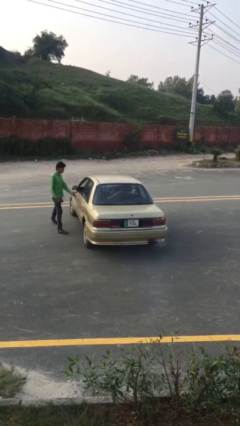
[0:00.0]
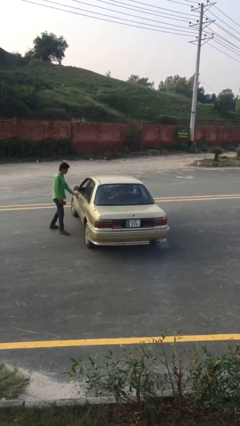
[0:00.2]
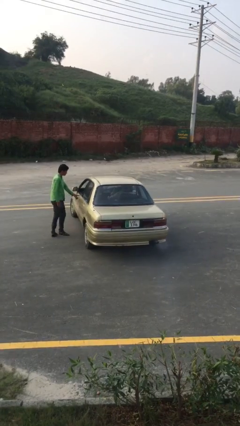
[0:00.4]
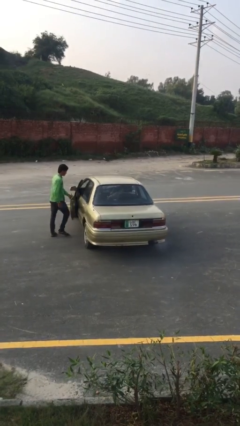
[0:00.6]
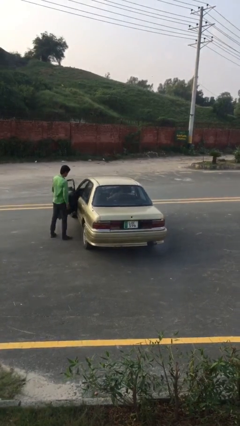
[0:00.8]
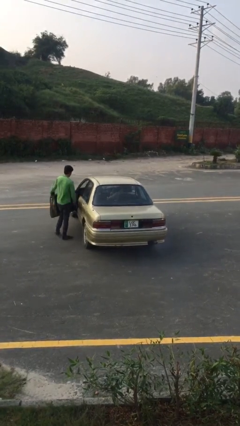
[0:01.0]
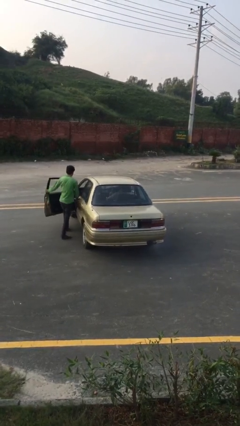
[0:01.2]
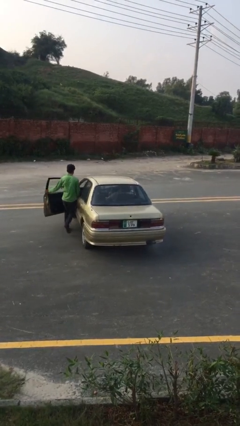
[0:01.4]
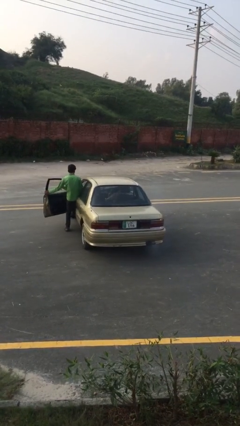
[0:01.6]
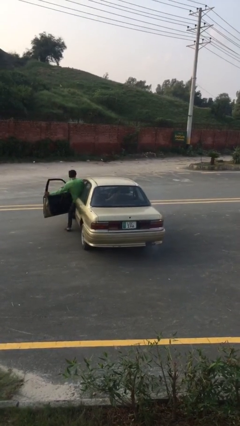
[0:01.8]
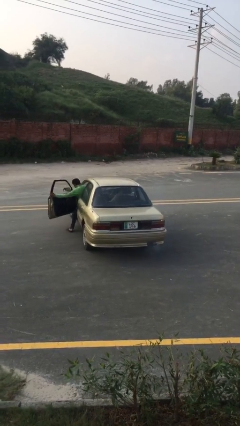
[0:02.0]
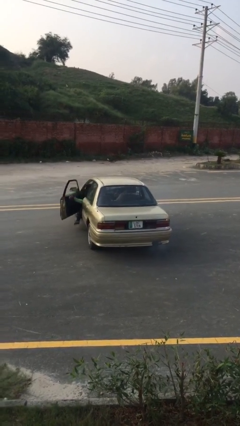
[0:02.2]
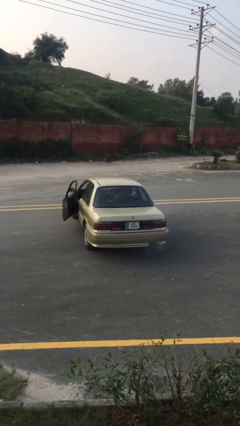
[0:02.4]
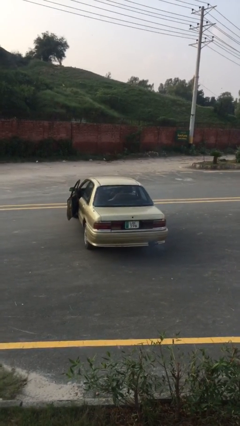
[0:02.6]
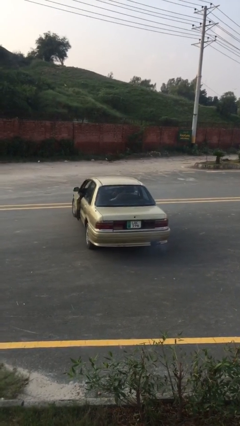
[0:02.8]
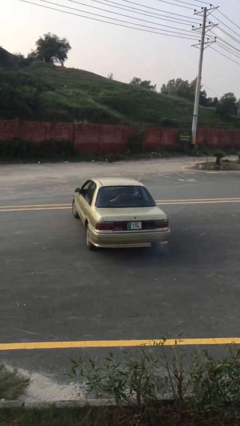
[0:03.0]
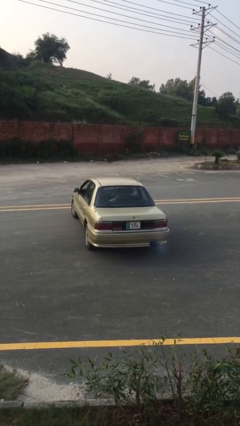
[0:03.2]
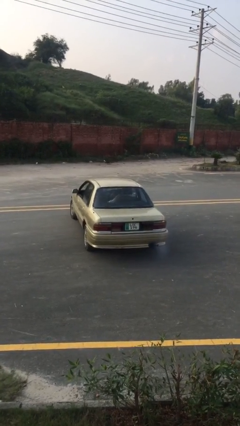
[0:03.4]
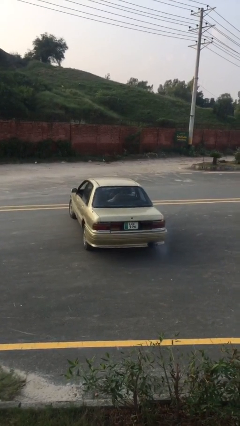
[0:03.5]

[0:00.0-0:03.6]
car picks up person

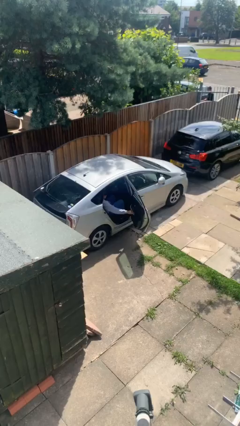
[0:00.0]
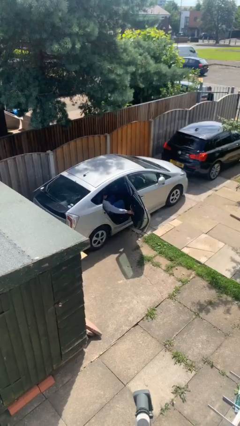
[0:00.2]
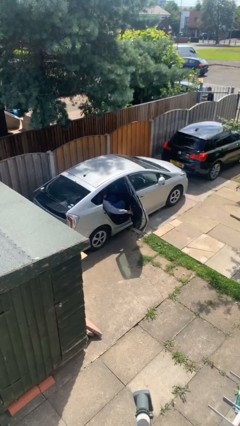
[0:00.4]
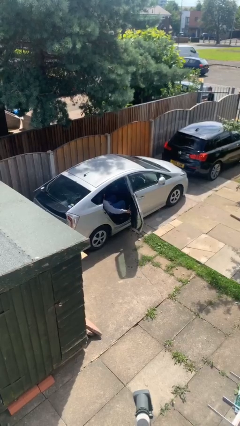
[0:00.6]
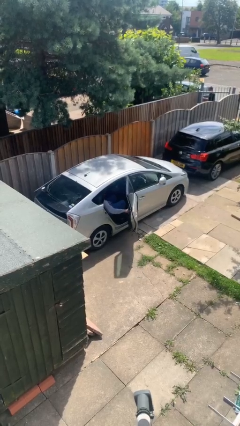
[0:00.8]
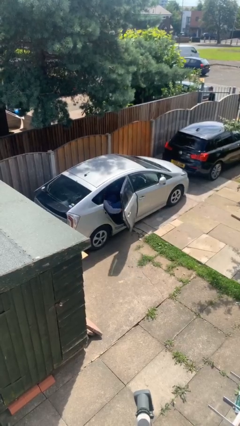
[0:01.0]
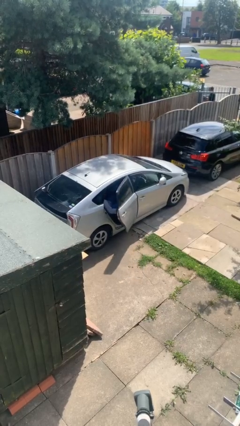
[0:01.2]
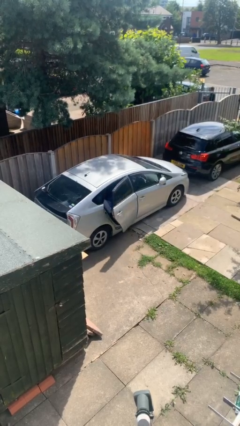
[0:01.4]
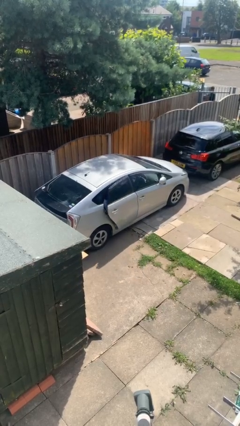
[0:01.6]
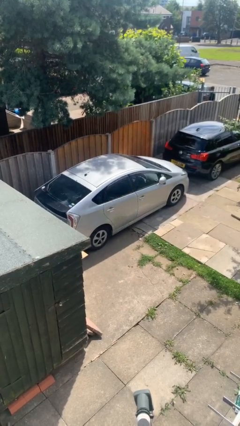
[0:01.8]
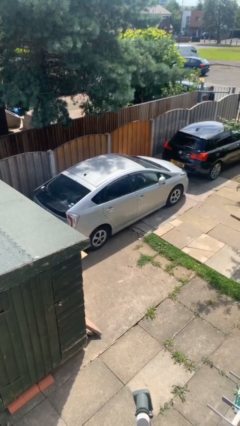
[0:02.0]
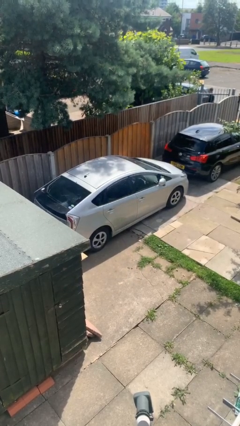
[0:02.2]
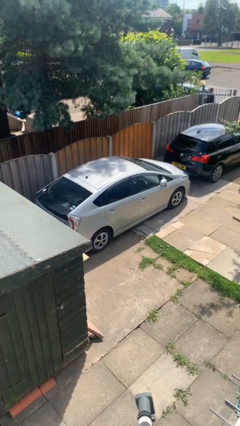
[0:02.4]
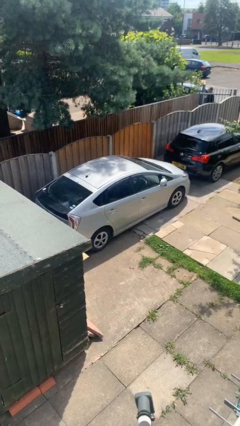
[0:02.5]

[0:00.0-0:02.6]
person closes car door

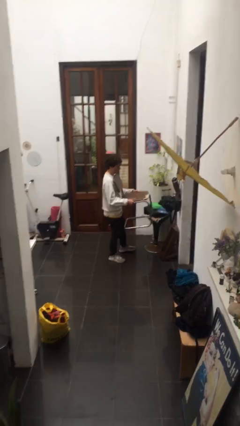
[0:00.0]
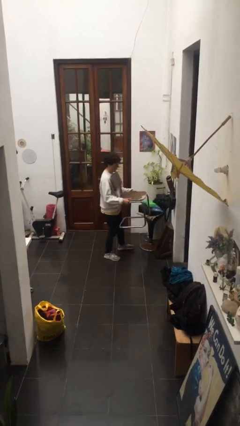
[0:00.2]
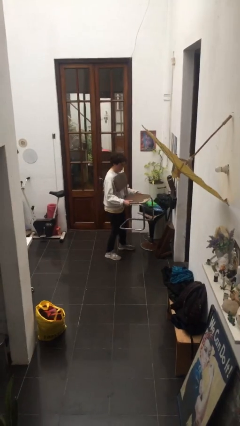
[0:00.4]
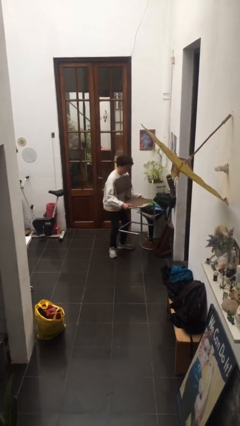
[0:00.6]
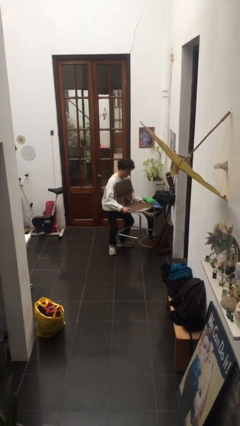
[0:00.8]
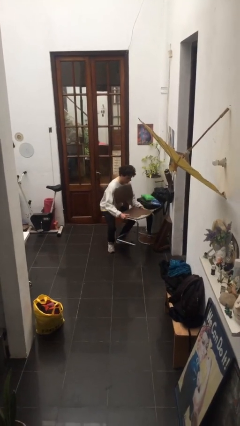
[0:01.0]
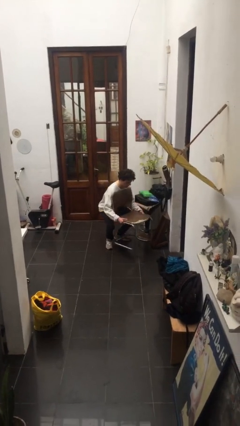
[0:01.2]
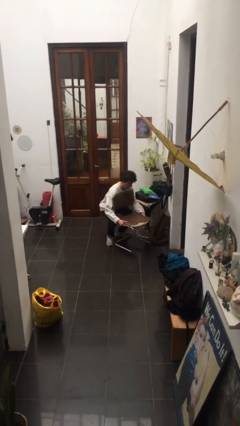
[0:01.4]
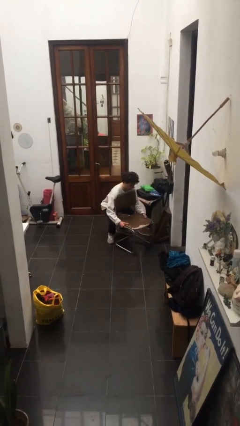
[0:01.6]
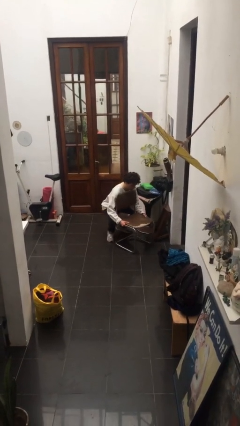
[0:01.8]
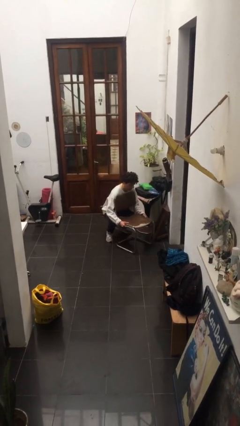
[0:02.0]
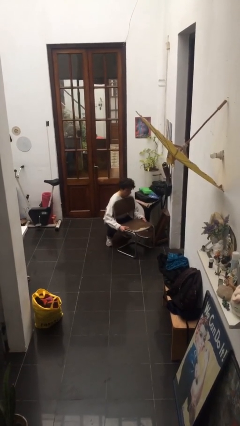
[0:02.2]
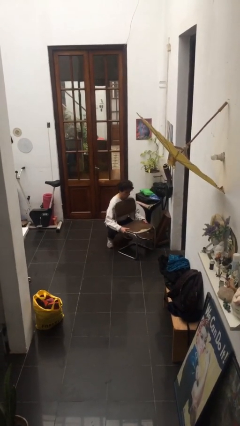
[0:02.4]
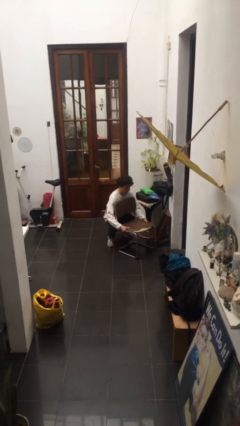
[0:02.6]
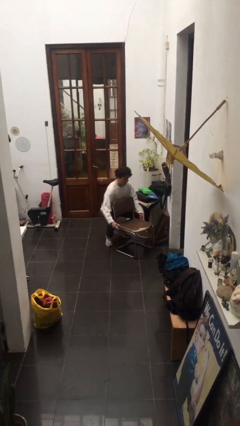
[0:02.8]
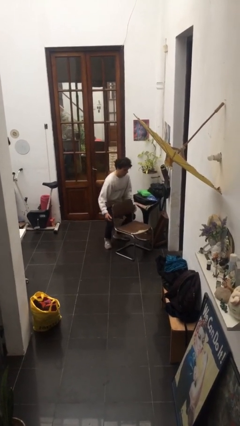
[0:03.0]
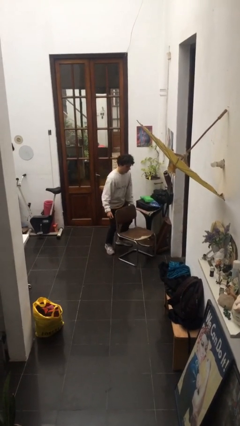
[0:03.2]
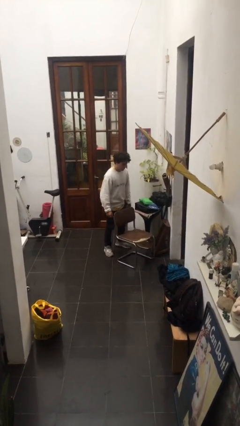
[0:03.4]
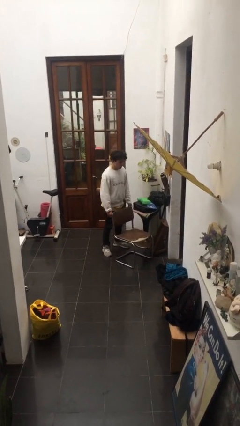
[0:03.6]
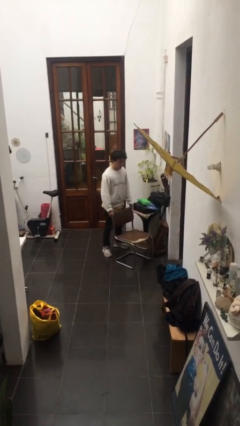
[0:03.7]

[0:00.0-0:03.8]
person puts down object on floor

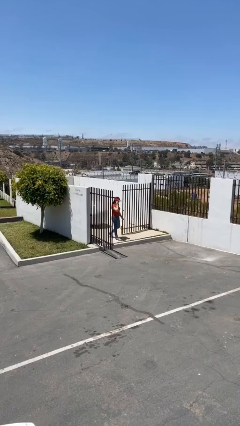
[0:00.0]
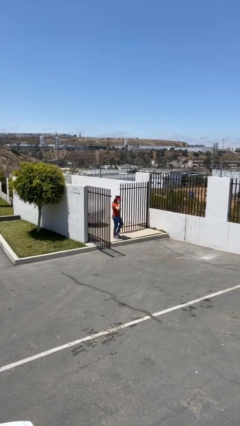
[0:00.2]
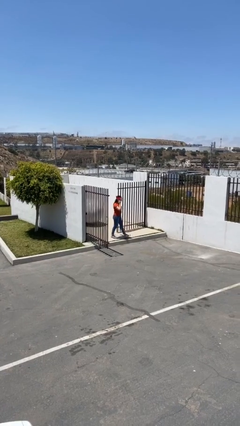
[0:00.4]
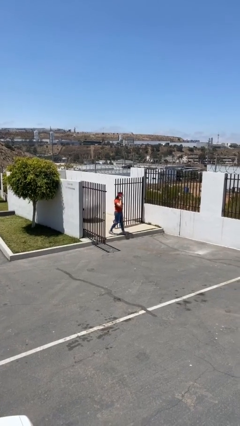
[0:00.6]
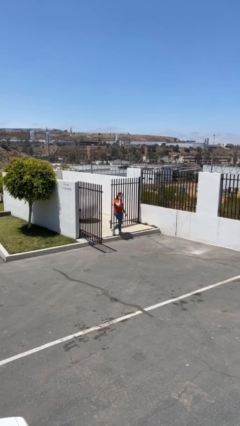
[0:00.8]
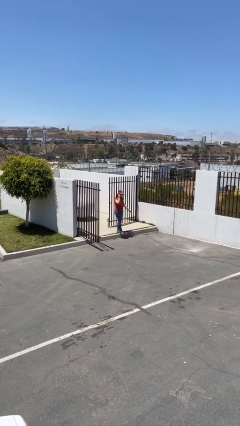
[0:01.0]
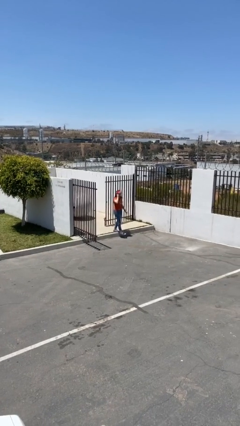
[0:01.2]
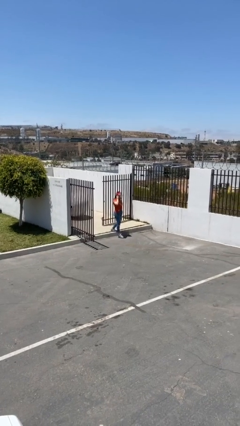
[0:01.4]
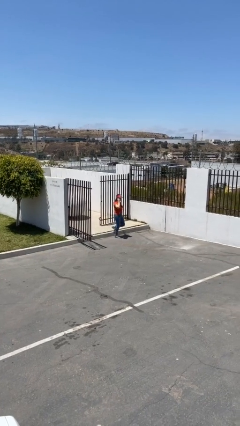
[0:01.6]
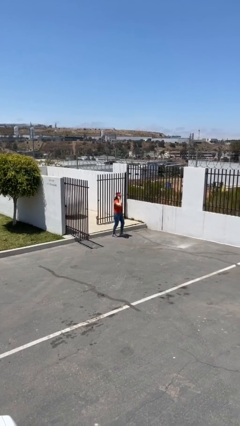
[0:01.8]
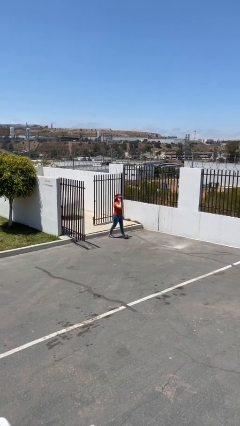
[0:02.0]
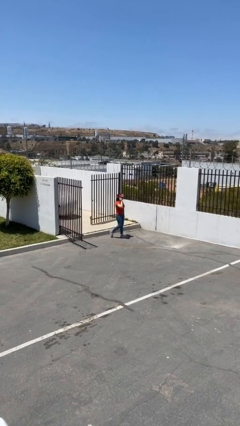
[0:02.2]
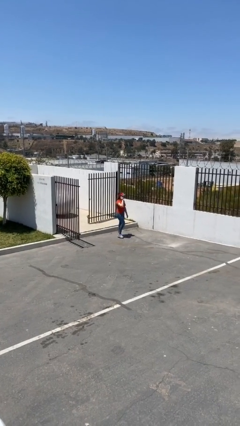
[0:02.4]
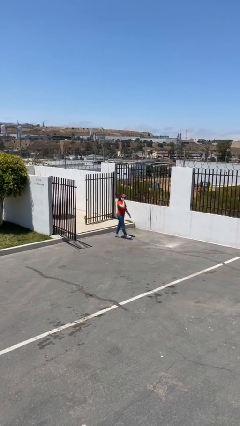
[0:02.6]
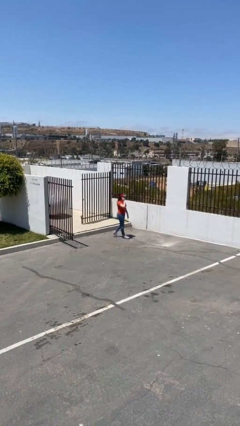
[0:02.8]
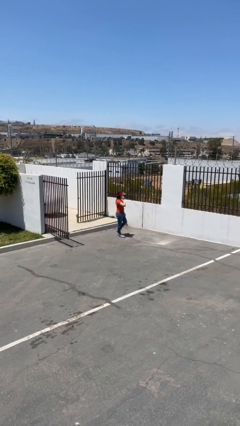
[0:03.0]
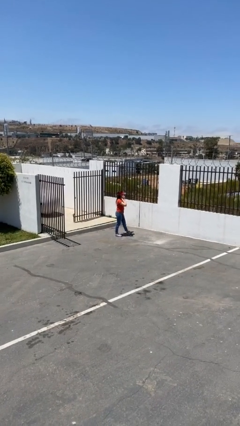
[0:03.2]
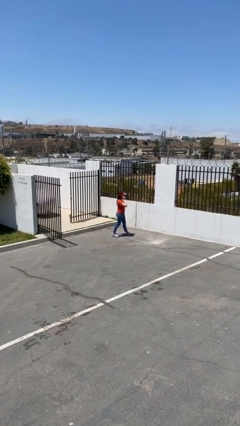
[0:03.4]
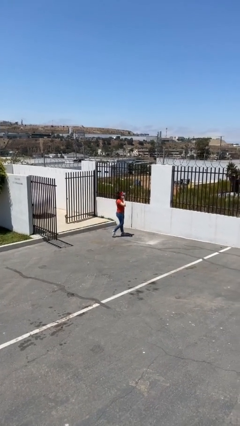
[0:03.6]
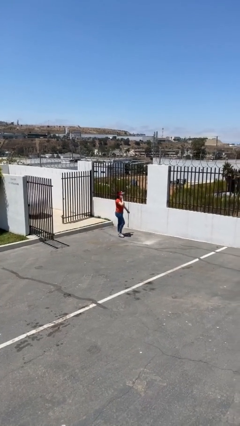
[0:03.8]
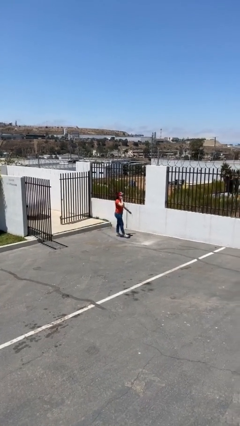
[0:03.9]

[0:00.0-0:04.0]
person enters scene through structure

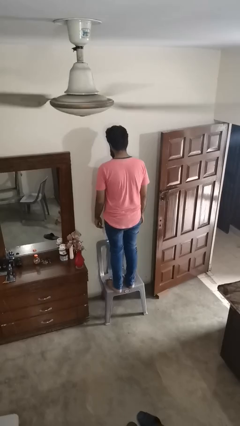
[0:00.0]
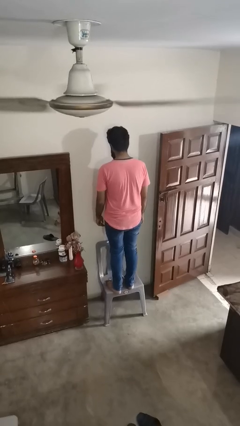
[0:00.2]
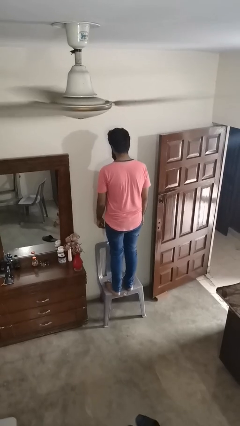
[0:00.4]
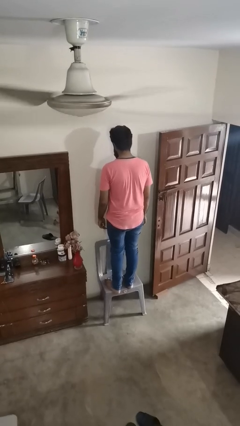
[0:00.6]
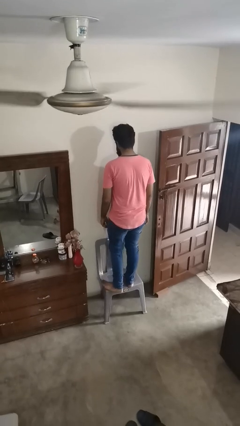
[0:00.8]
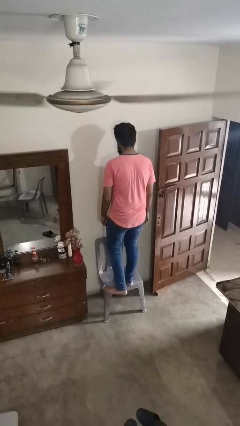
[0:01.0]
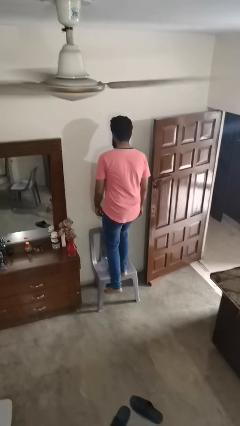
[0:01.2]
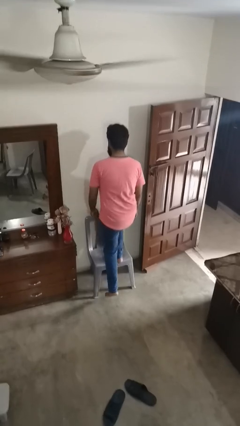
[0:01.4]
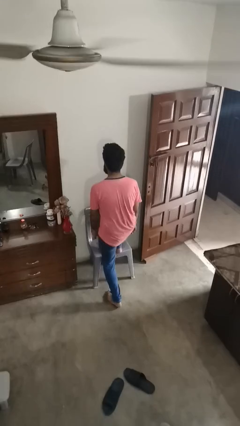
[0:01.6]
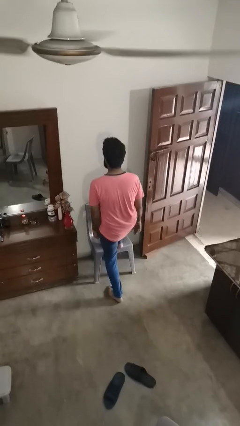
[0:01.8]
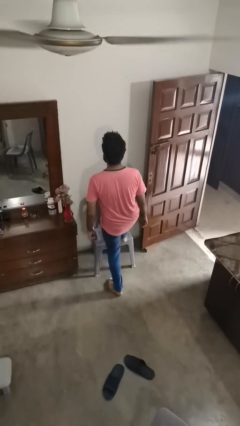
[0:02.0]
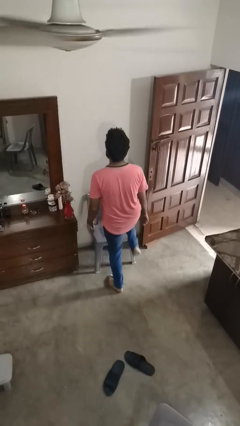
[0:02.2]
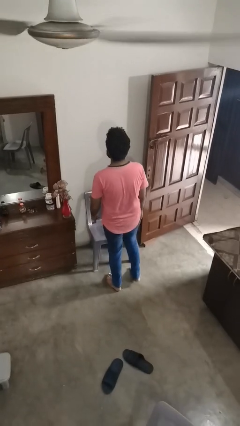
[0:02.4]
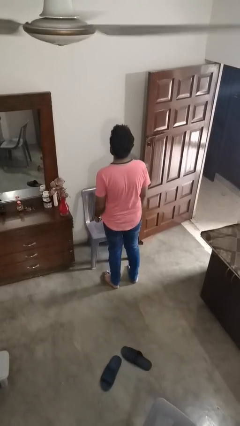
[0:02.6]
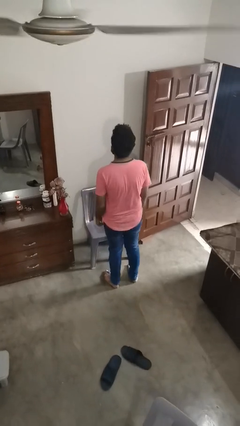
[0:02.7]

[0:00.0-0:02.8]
person climbs off chair

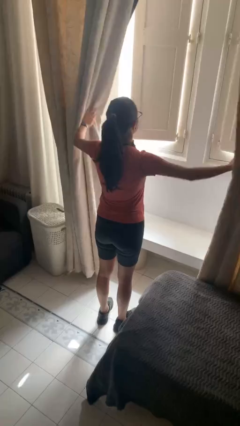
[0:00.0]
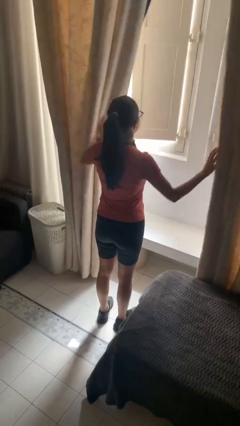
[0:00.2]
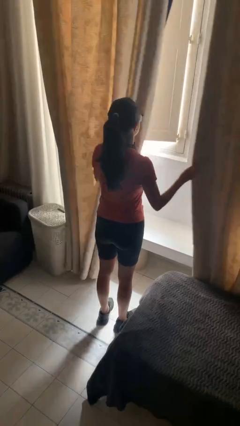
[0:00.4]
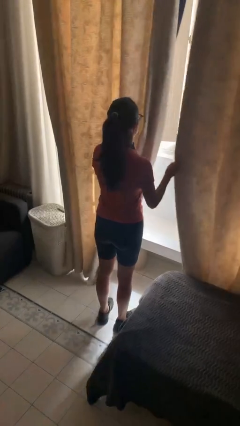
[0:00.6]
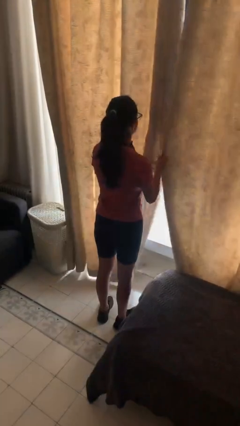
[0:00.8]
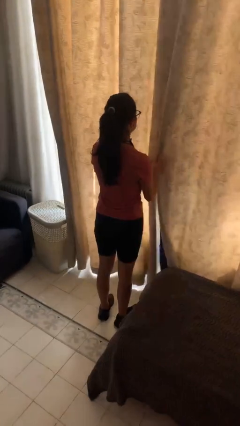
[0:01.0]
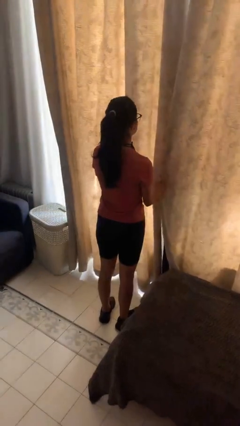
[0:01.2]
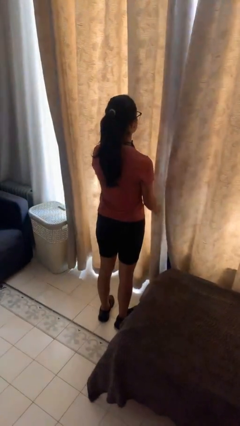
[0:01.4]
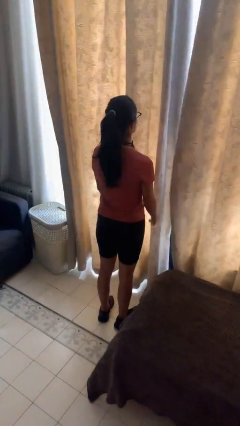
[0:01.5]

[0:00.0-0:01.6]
person closes curtains
